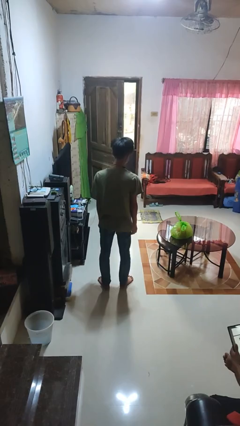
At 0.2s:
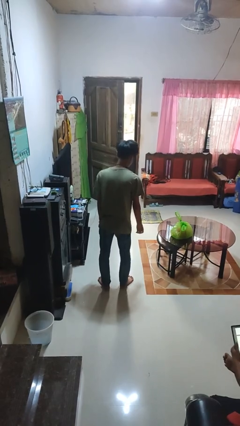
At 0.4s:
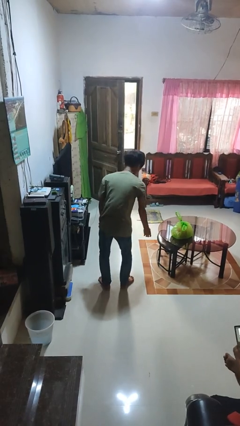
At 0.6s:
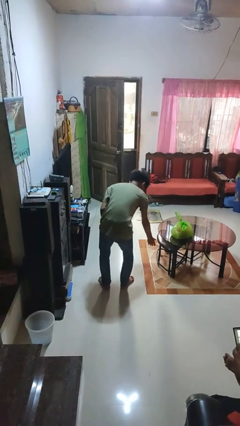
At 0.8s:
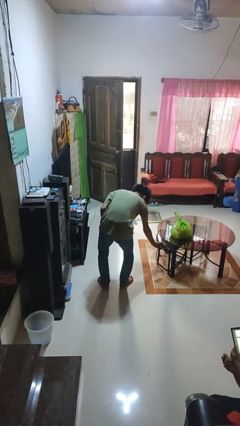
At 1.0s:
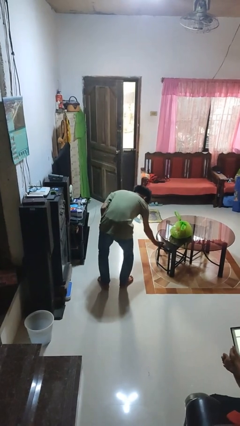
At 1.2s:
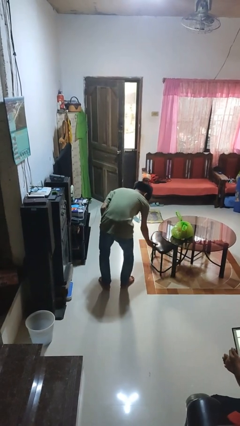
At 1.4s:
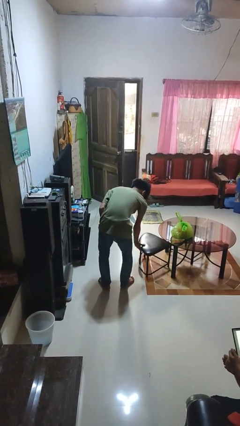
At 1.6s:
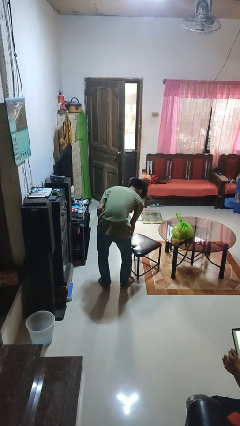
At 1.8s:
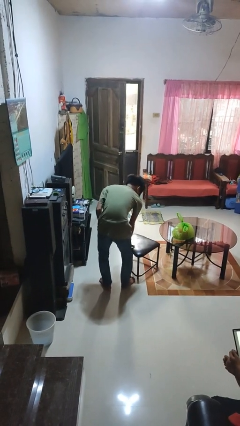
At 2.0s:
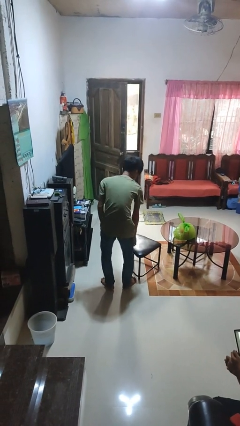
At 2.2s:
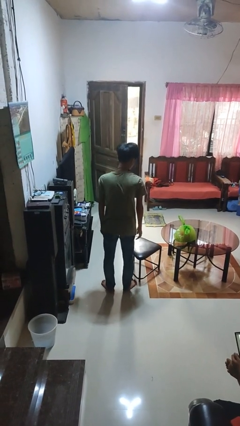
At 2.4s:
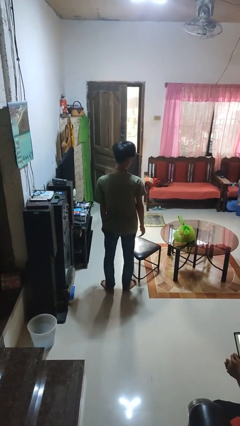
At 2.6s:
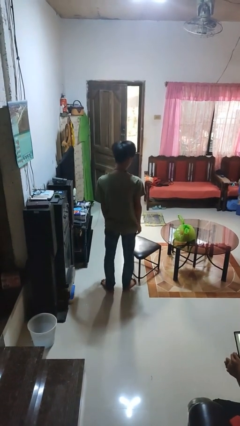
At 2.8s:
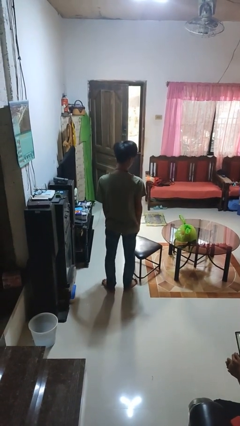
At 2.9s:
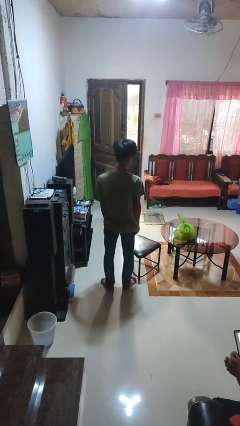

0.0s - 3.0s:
person pulls out chair

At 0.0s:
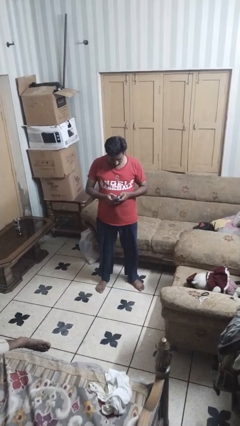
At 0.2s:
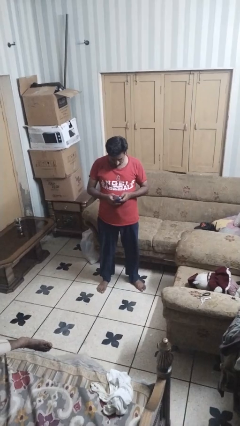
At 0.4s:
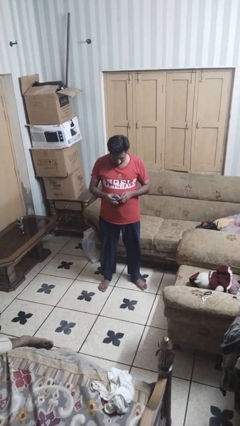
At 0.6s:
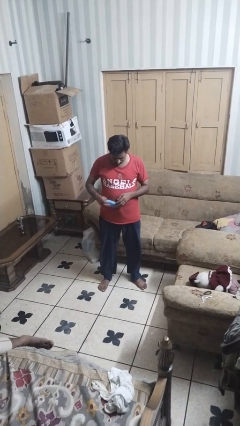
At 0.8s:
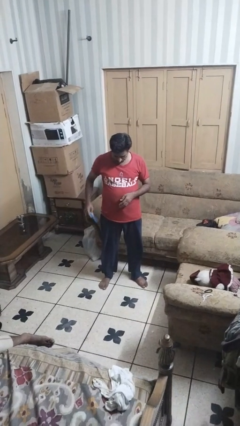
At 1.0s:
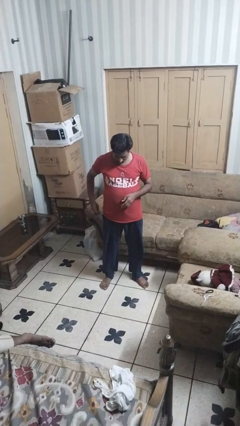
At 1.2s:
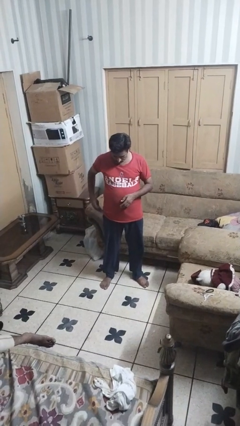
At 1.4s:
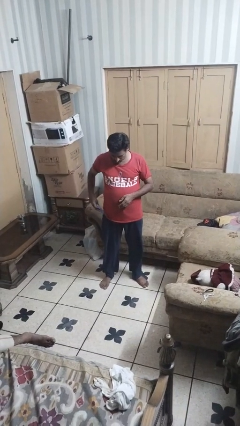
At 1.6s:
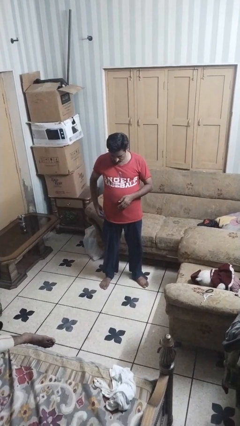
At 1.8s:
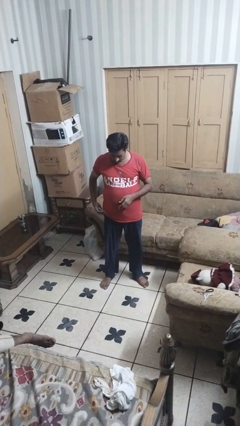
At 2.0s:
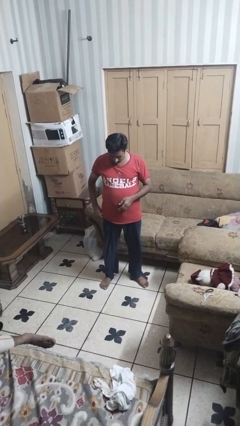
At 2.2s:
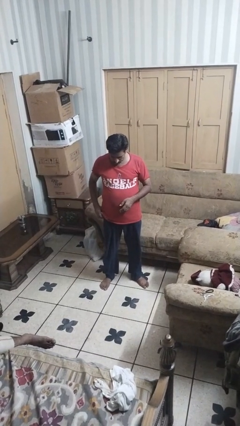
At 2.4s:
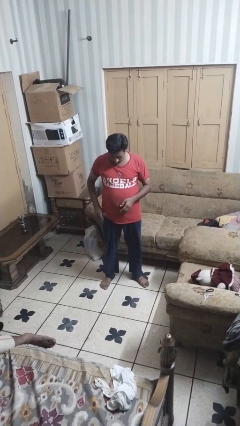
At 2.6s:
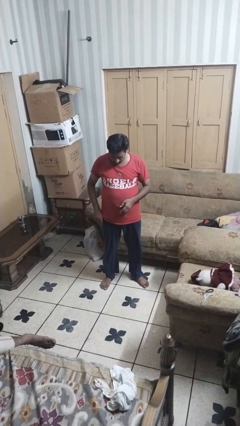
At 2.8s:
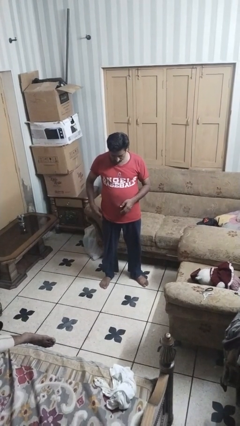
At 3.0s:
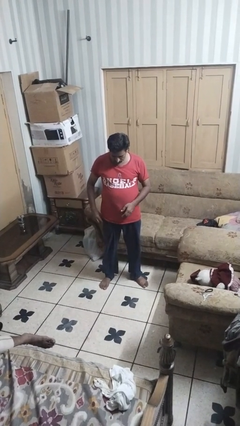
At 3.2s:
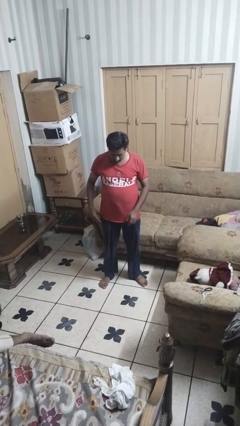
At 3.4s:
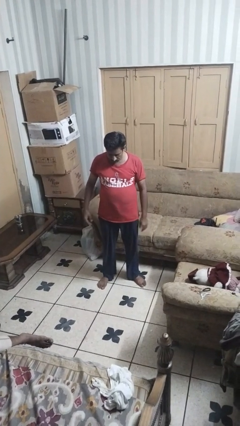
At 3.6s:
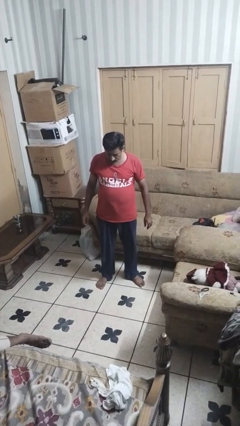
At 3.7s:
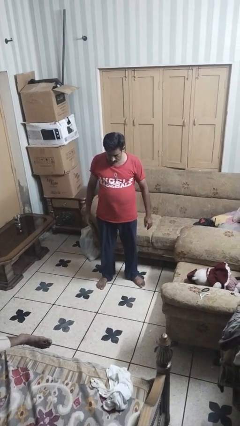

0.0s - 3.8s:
person puts phone into pocket

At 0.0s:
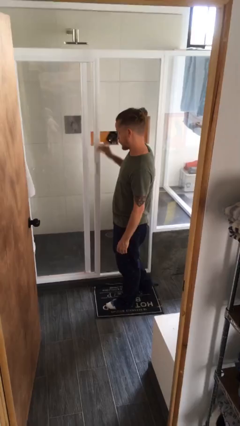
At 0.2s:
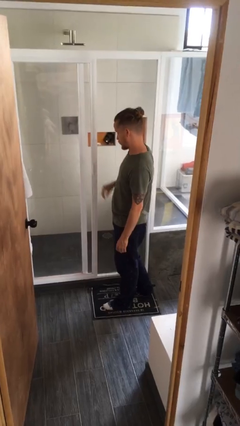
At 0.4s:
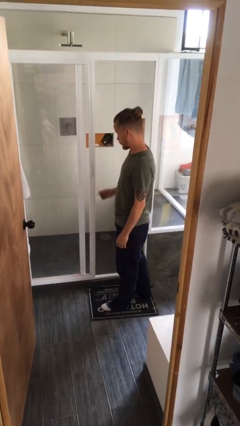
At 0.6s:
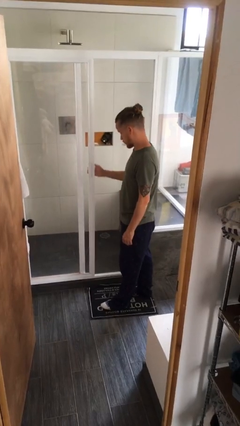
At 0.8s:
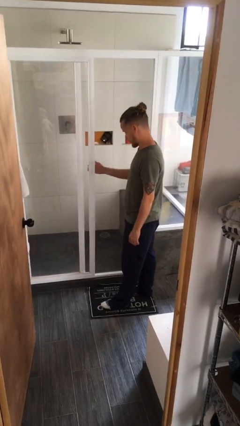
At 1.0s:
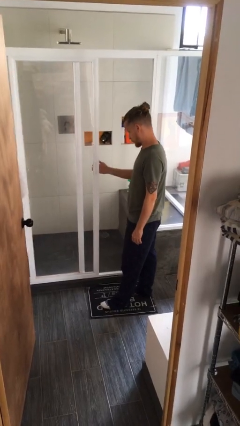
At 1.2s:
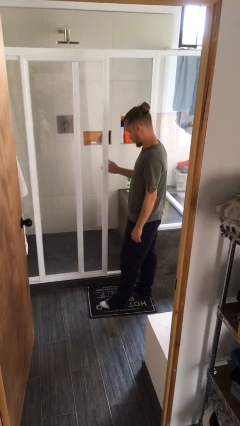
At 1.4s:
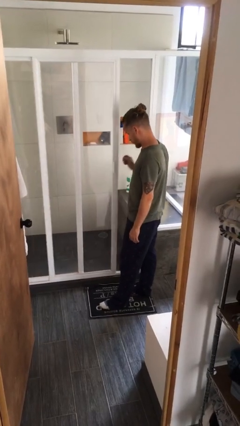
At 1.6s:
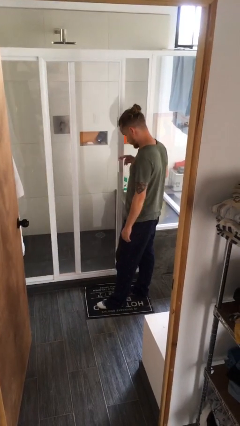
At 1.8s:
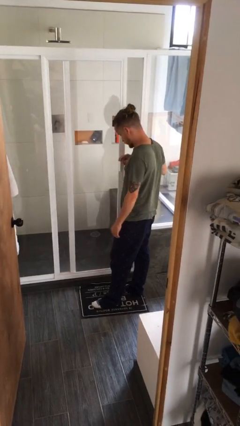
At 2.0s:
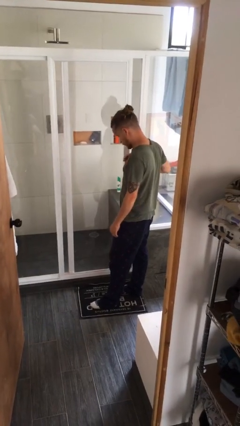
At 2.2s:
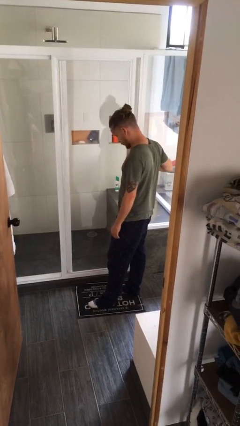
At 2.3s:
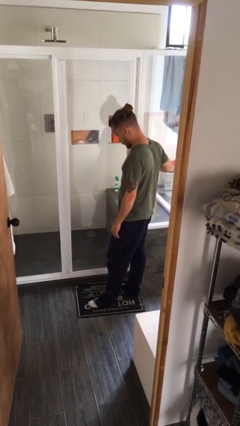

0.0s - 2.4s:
person closes sliding door

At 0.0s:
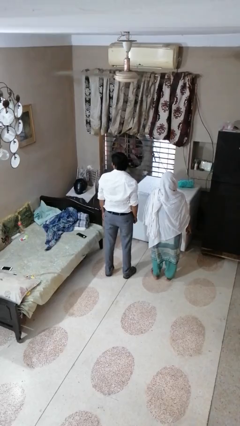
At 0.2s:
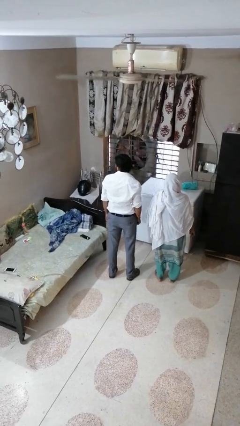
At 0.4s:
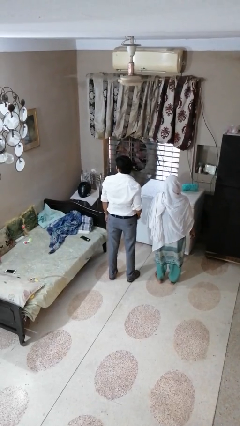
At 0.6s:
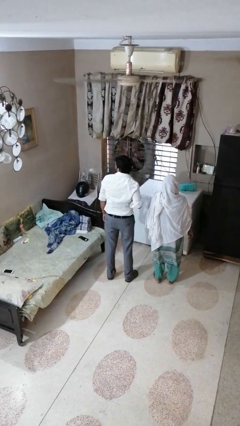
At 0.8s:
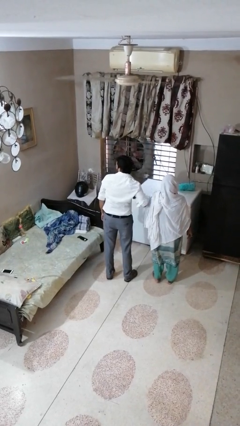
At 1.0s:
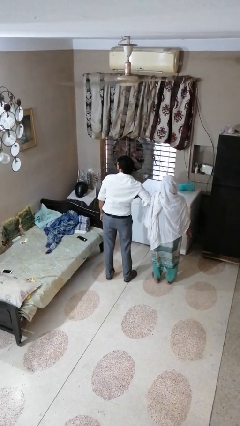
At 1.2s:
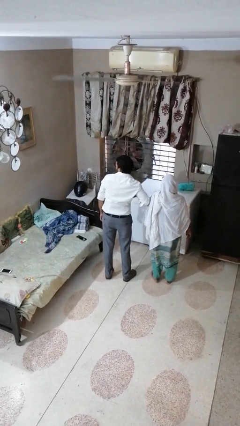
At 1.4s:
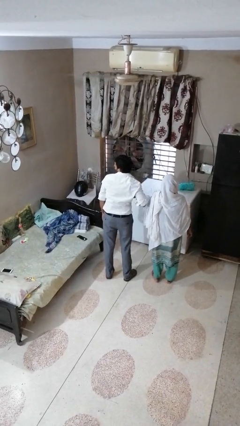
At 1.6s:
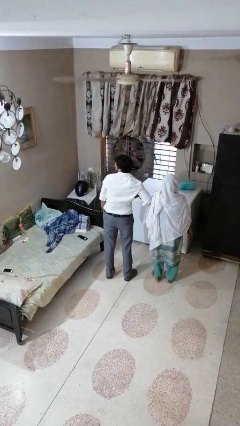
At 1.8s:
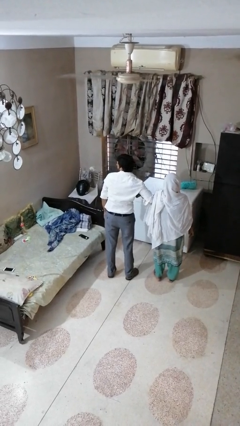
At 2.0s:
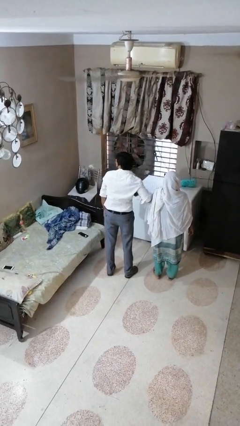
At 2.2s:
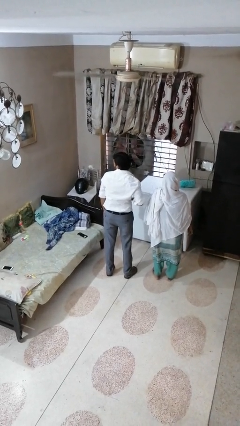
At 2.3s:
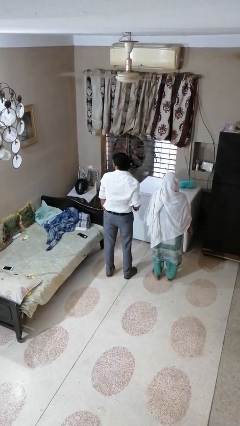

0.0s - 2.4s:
person nudges person with elbow

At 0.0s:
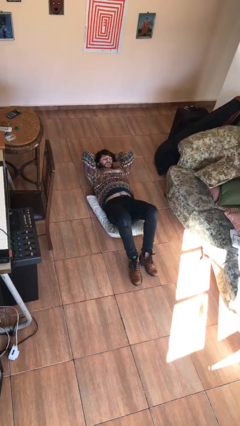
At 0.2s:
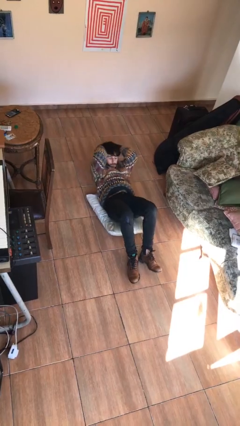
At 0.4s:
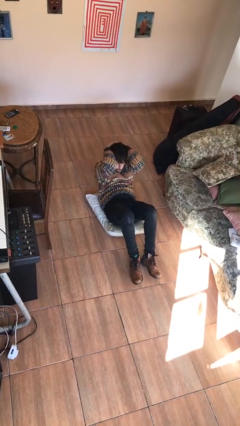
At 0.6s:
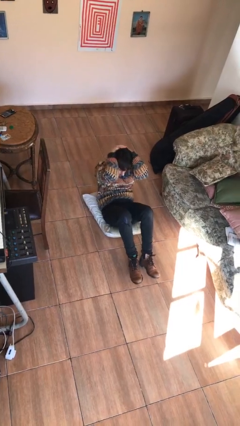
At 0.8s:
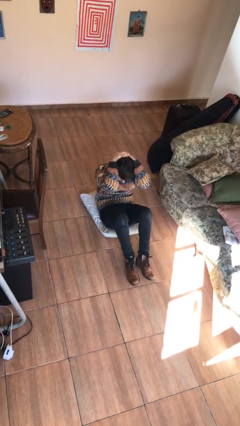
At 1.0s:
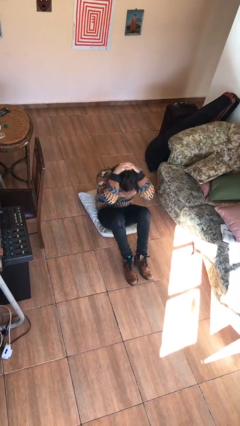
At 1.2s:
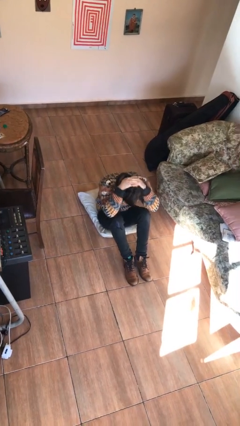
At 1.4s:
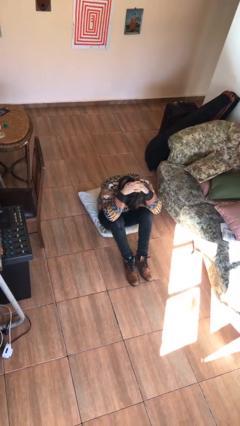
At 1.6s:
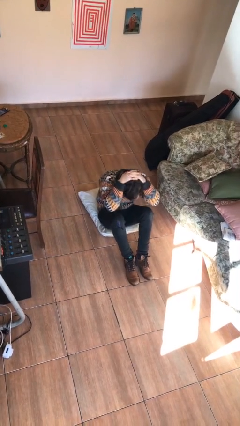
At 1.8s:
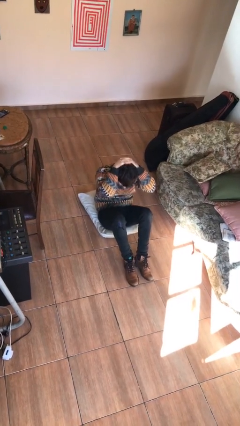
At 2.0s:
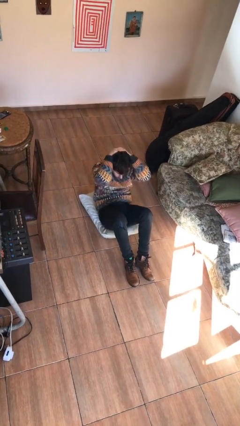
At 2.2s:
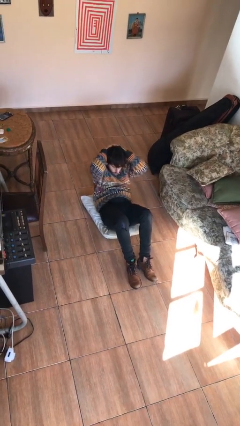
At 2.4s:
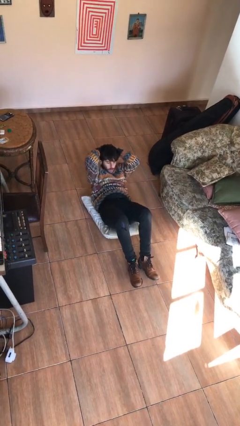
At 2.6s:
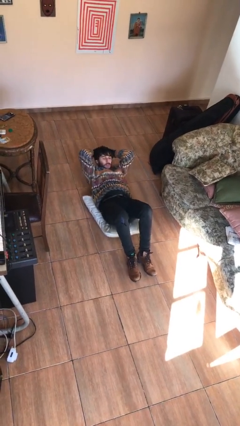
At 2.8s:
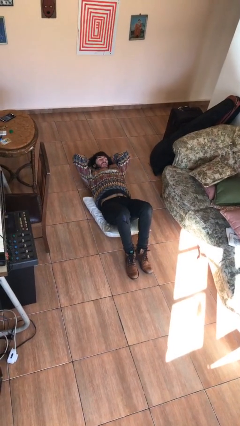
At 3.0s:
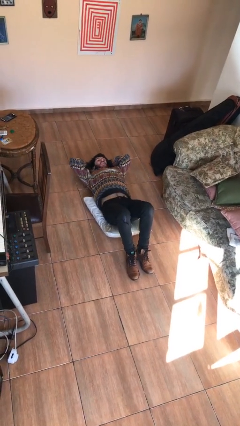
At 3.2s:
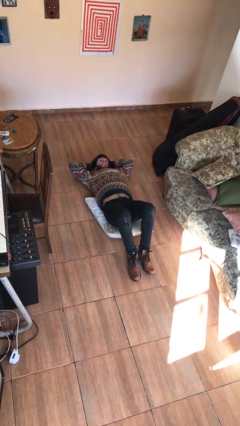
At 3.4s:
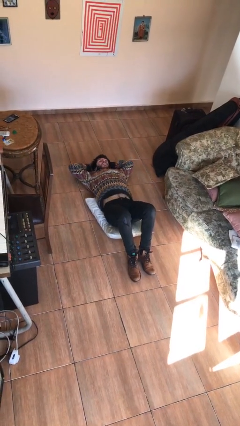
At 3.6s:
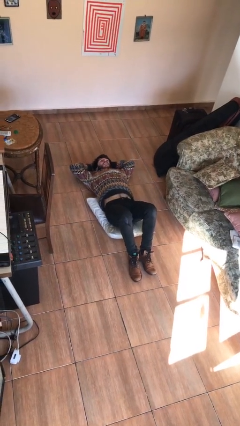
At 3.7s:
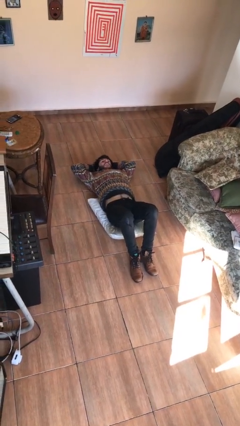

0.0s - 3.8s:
person exercises with situp

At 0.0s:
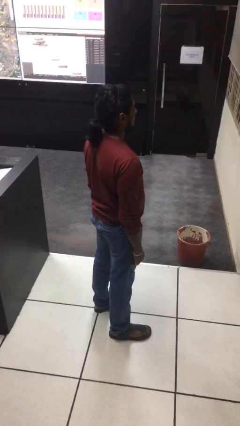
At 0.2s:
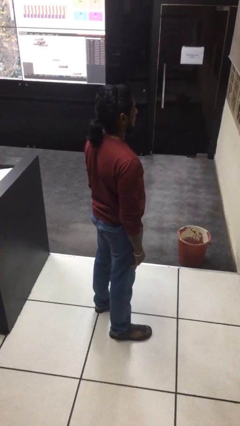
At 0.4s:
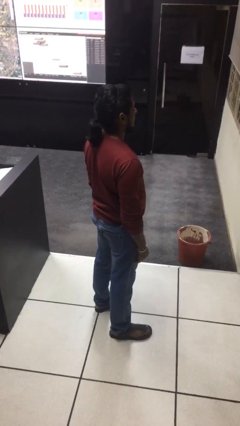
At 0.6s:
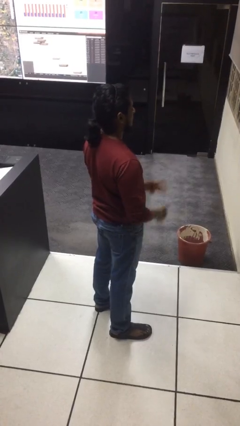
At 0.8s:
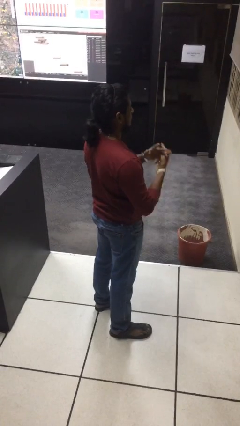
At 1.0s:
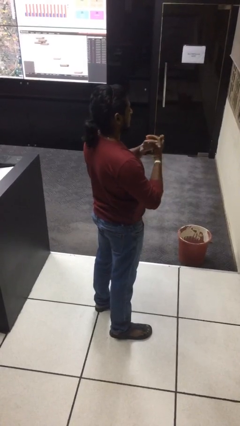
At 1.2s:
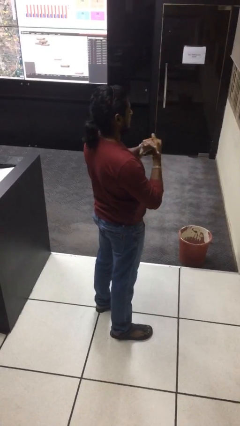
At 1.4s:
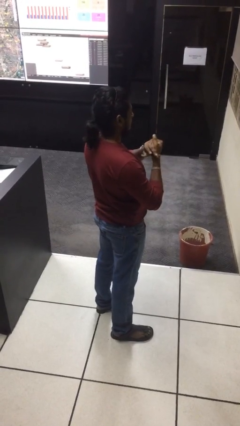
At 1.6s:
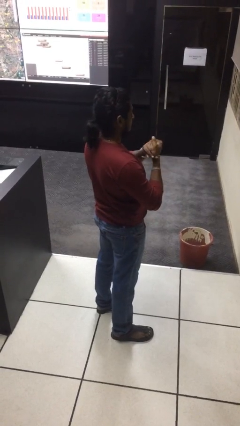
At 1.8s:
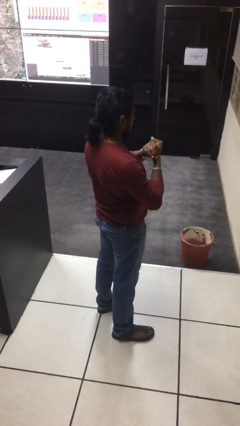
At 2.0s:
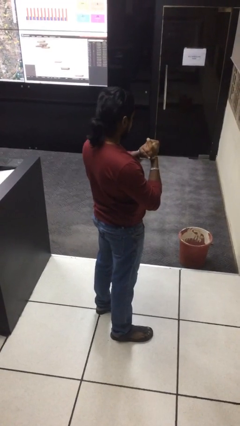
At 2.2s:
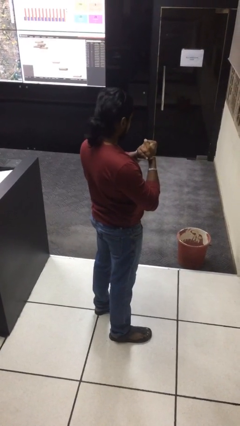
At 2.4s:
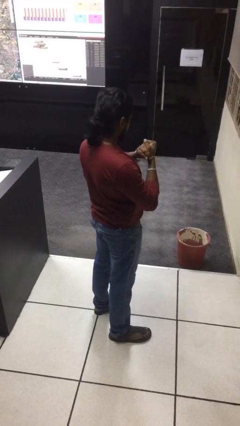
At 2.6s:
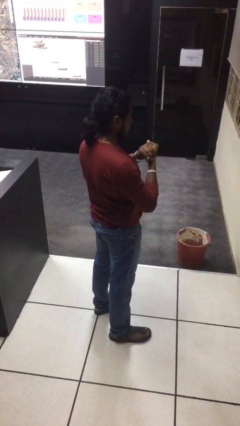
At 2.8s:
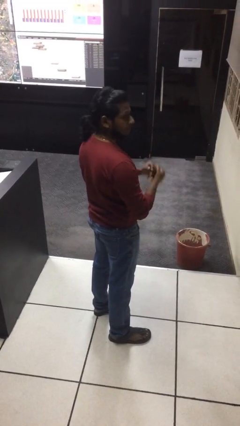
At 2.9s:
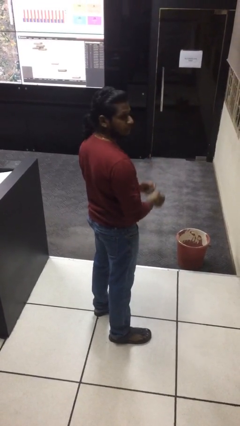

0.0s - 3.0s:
person cracks knuckles
